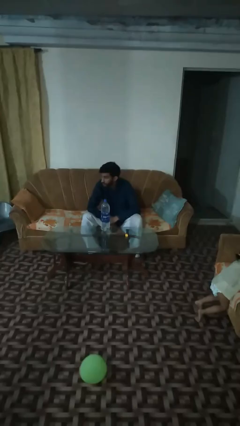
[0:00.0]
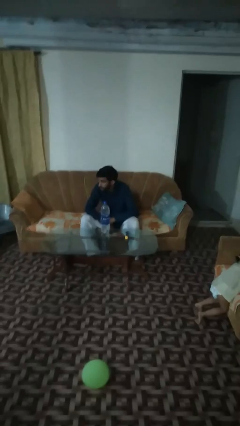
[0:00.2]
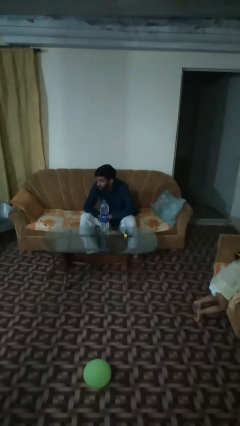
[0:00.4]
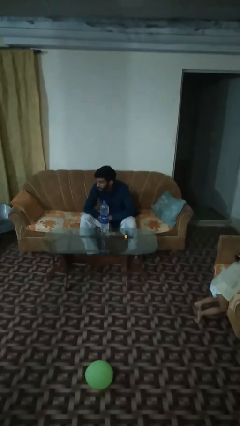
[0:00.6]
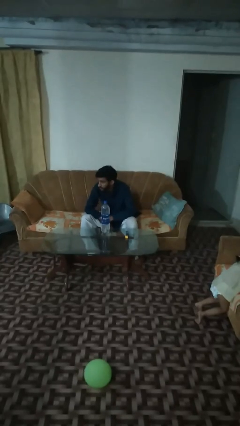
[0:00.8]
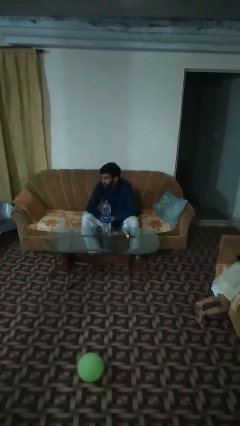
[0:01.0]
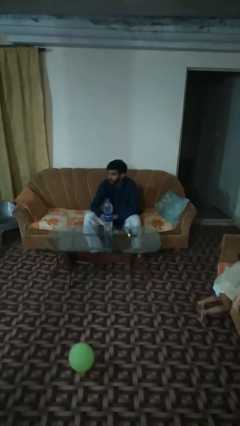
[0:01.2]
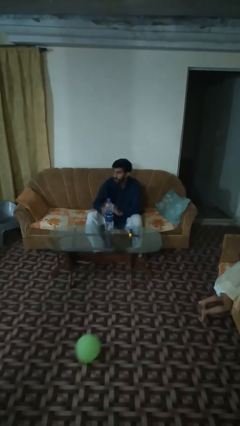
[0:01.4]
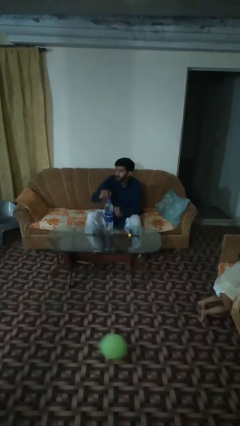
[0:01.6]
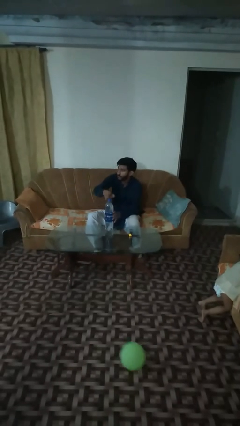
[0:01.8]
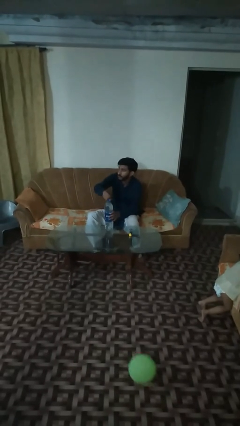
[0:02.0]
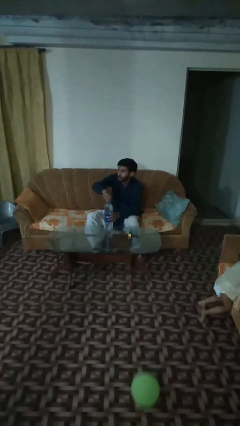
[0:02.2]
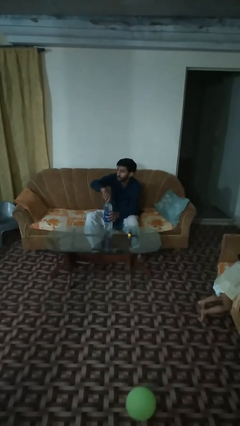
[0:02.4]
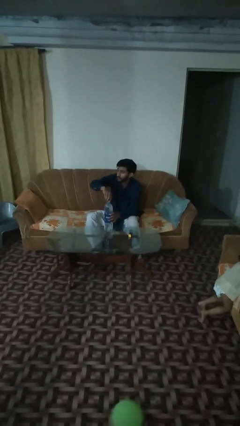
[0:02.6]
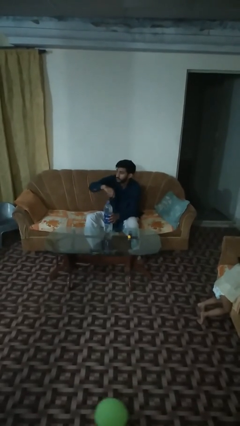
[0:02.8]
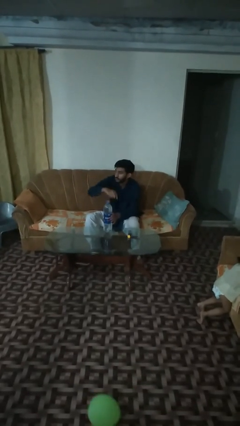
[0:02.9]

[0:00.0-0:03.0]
person unscrews lid from bottle

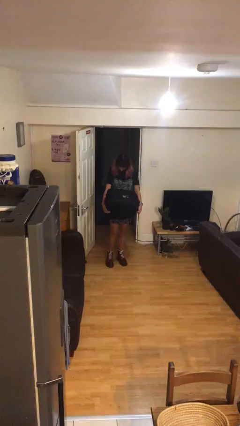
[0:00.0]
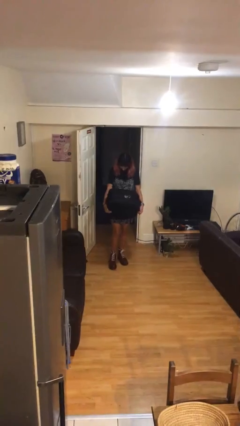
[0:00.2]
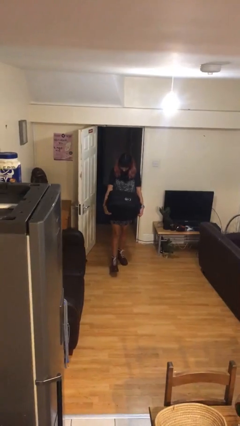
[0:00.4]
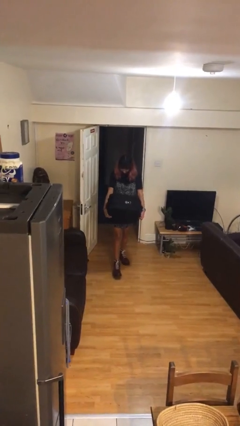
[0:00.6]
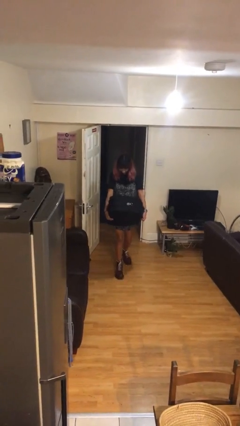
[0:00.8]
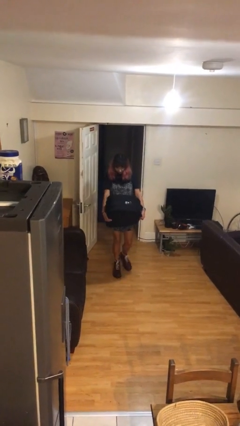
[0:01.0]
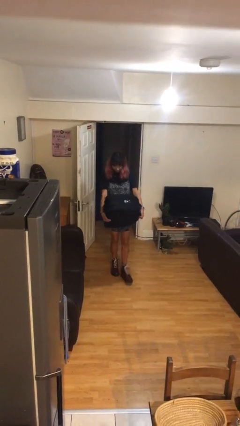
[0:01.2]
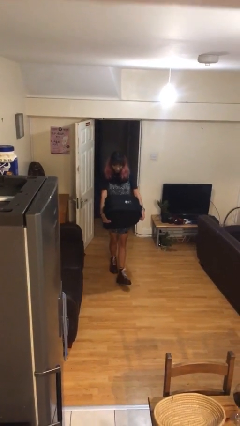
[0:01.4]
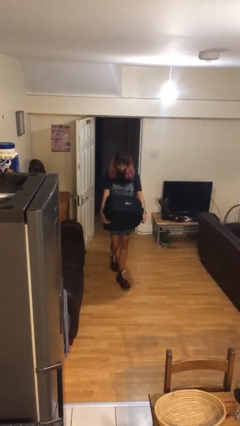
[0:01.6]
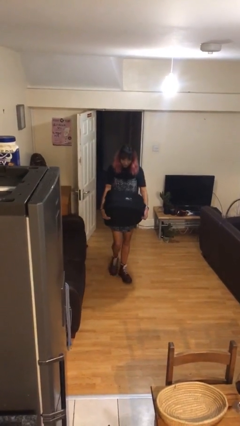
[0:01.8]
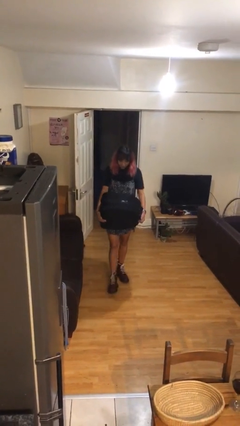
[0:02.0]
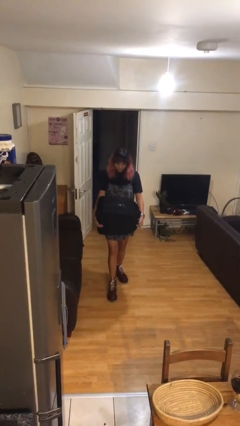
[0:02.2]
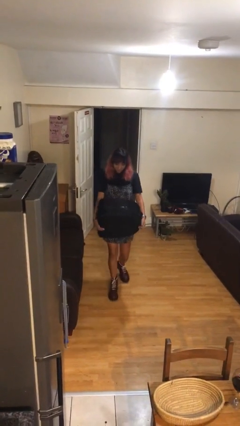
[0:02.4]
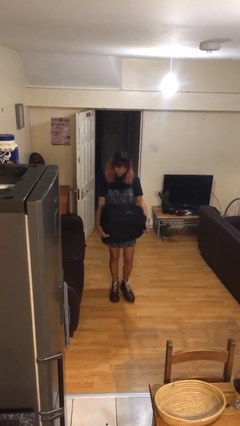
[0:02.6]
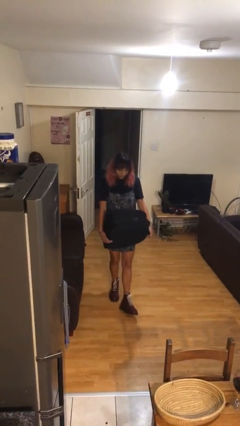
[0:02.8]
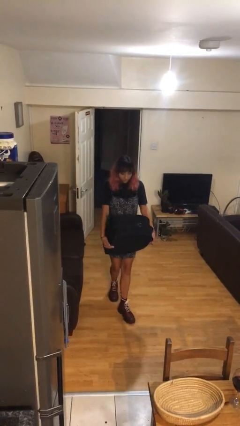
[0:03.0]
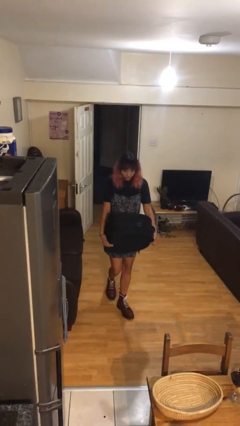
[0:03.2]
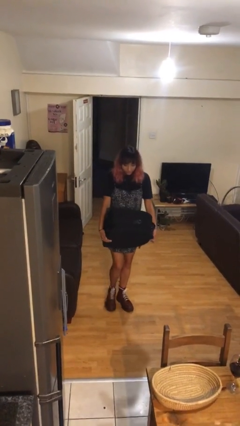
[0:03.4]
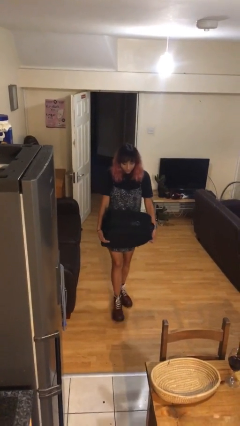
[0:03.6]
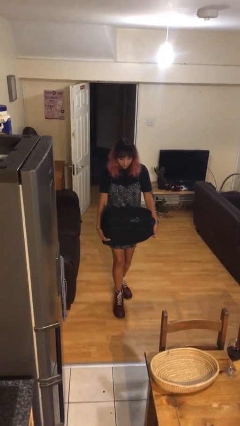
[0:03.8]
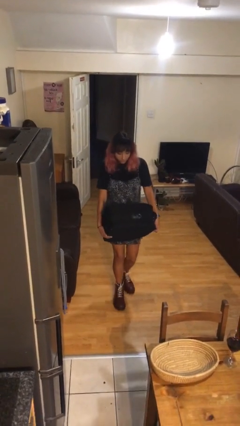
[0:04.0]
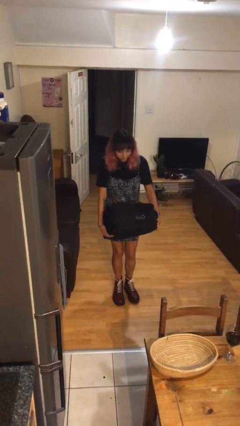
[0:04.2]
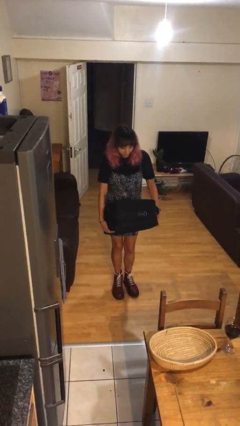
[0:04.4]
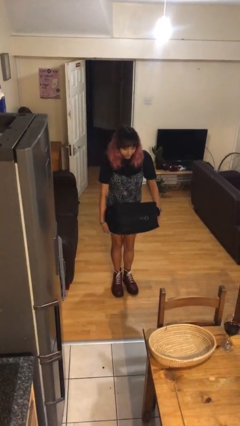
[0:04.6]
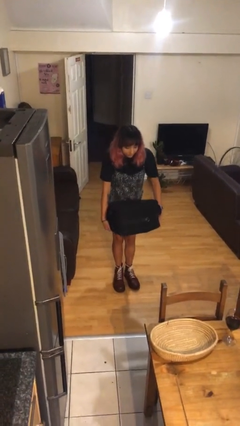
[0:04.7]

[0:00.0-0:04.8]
person carries heavy object

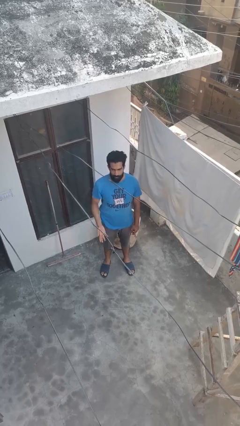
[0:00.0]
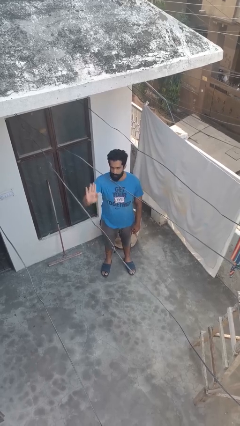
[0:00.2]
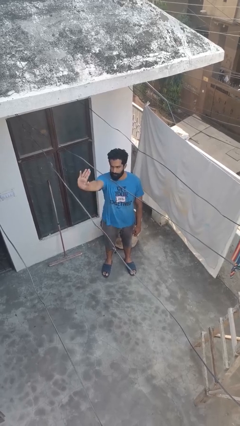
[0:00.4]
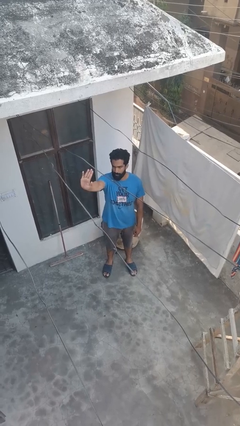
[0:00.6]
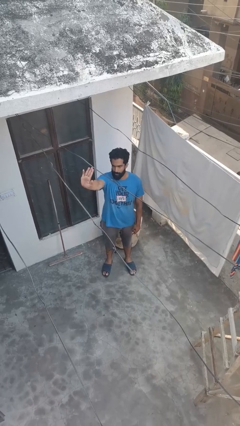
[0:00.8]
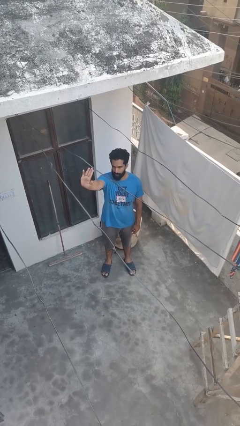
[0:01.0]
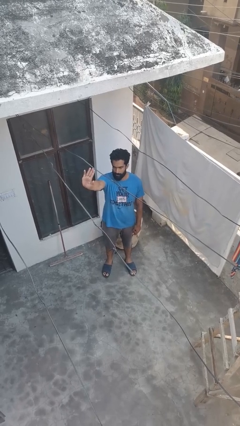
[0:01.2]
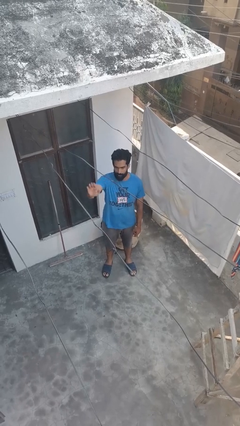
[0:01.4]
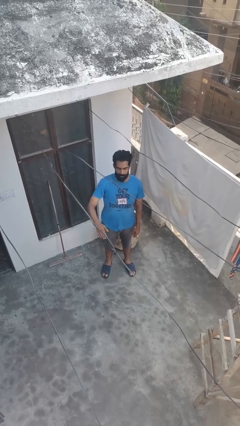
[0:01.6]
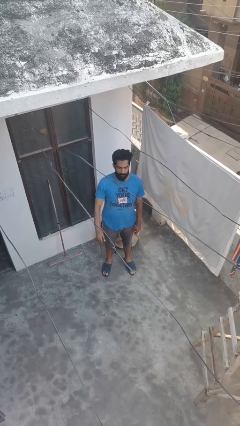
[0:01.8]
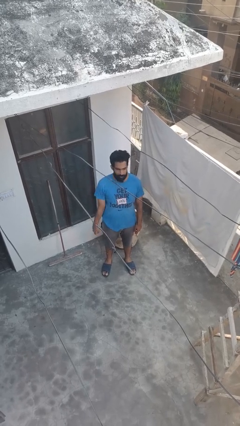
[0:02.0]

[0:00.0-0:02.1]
person gestures stop

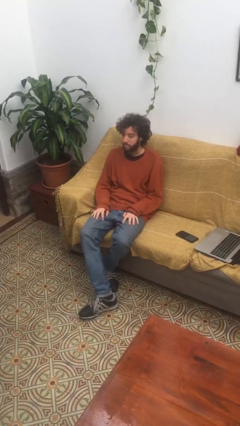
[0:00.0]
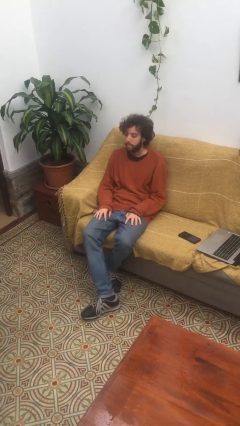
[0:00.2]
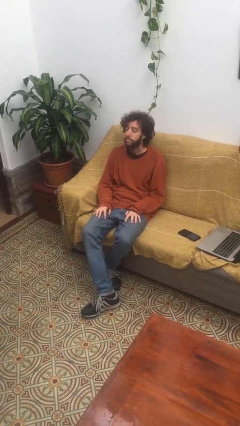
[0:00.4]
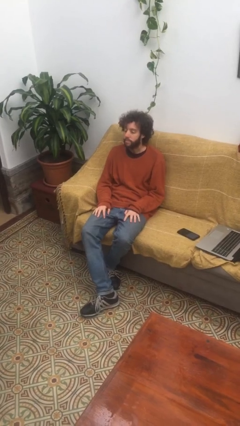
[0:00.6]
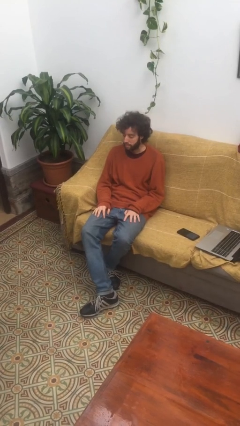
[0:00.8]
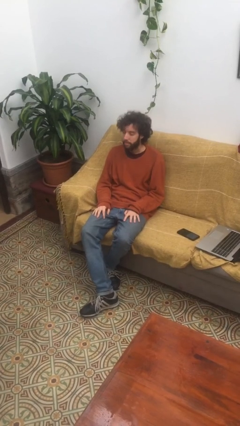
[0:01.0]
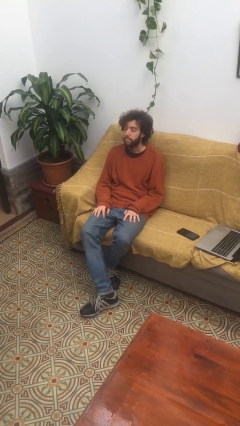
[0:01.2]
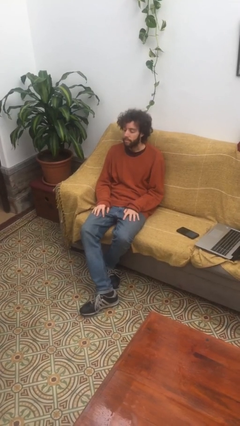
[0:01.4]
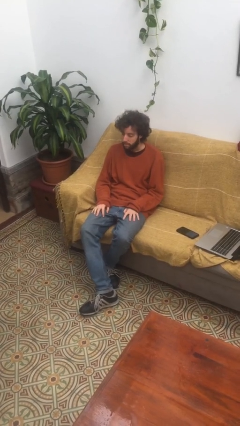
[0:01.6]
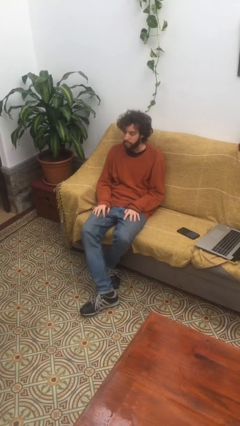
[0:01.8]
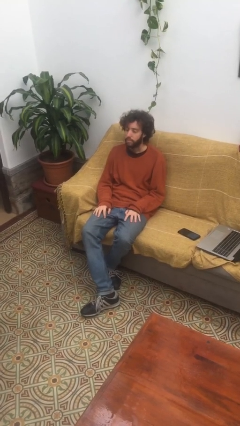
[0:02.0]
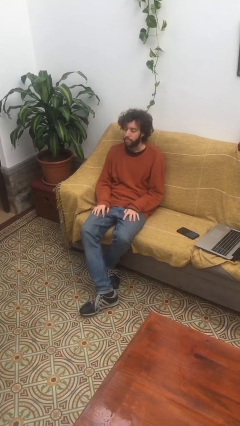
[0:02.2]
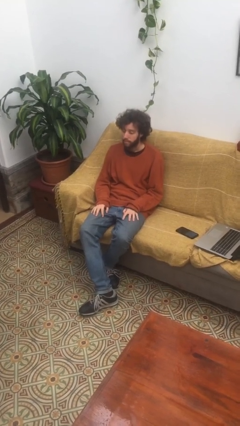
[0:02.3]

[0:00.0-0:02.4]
person nods head

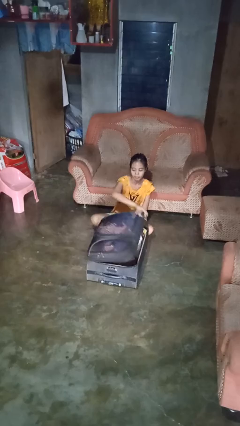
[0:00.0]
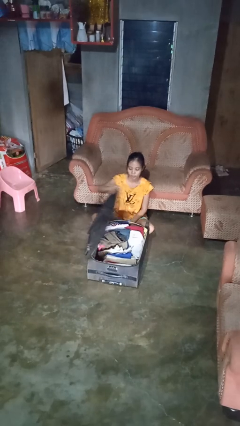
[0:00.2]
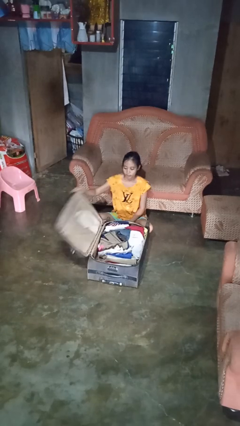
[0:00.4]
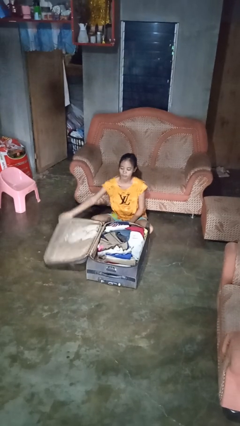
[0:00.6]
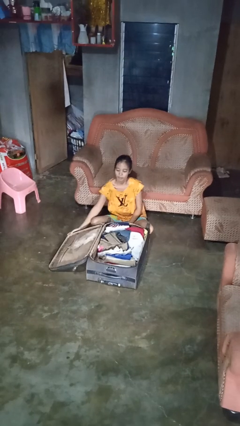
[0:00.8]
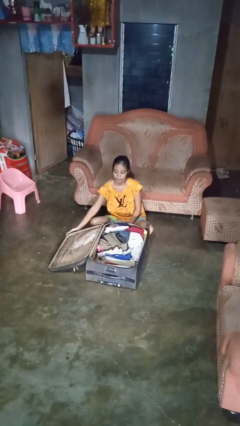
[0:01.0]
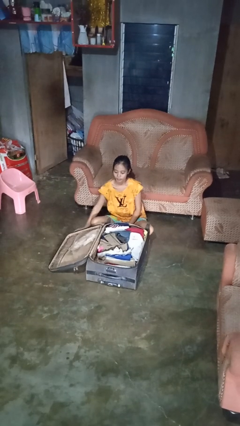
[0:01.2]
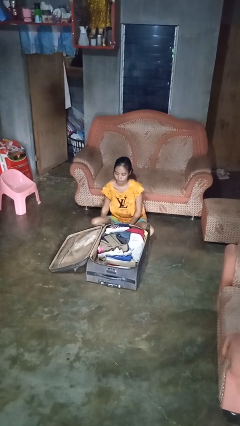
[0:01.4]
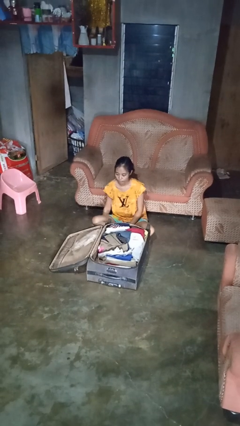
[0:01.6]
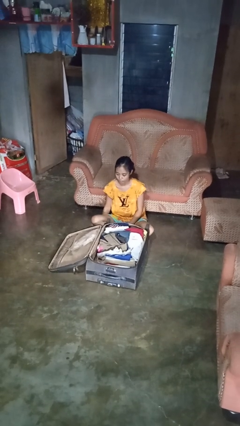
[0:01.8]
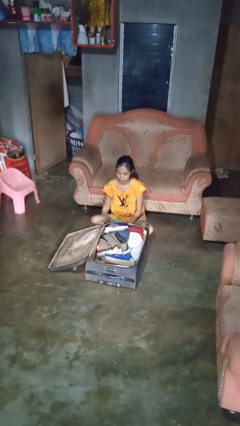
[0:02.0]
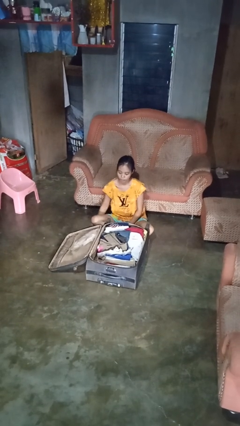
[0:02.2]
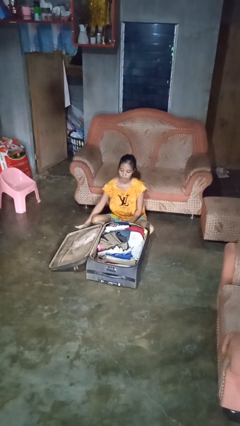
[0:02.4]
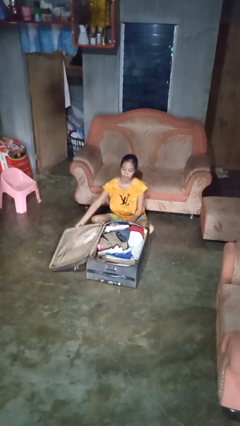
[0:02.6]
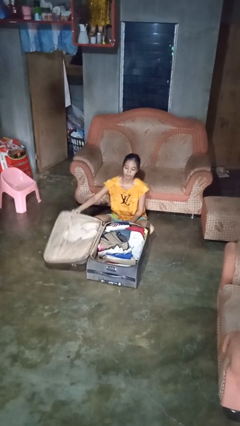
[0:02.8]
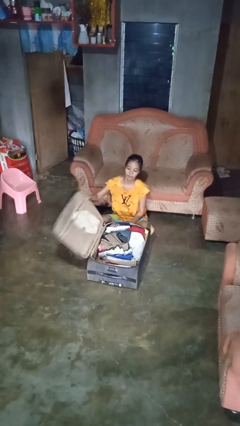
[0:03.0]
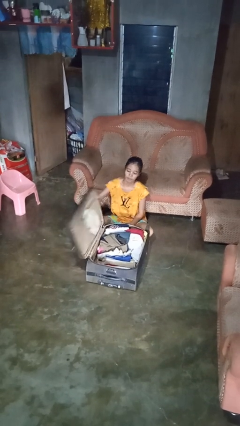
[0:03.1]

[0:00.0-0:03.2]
person opens suitcase

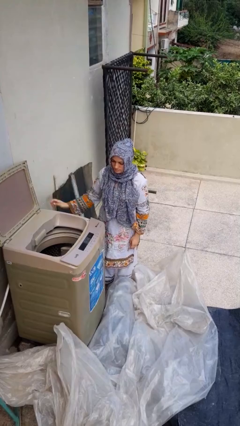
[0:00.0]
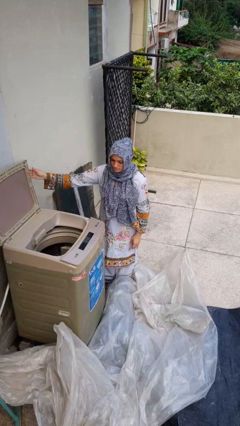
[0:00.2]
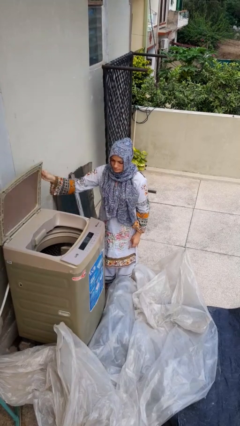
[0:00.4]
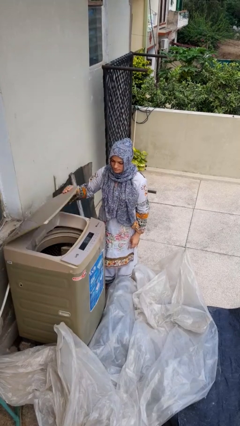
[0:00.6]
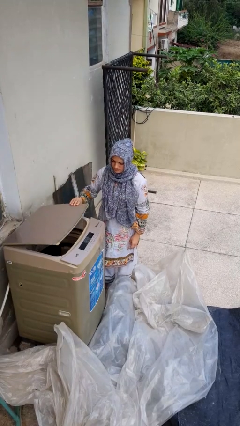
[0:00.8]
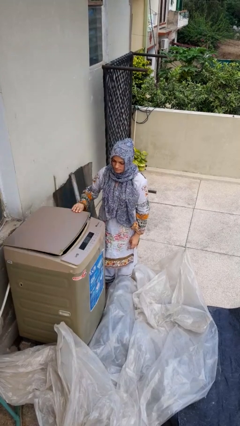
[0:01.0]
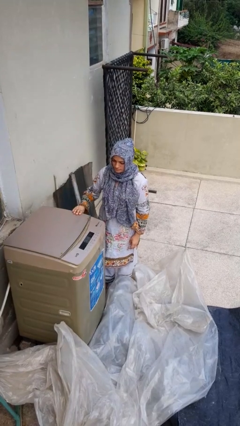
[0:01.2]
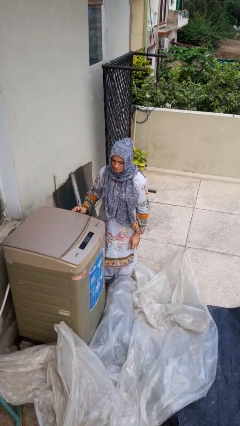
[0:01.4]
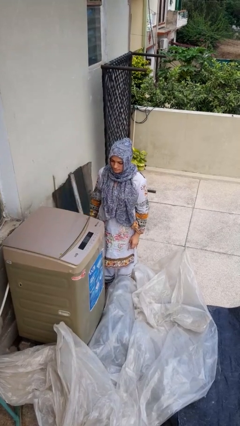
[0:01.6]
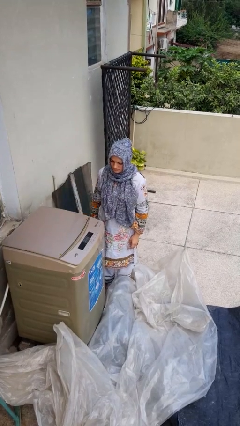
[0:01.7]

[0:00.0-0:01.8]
person closes clothes washer

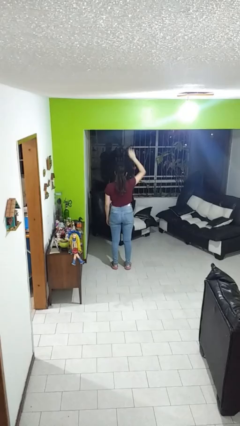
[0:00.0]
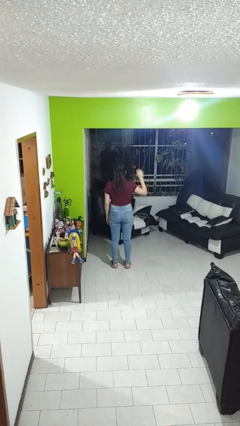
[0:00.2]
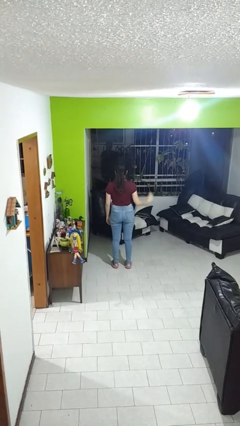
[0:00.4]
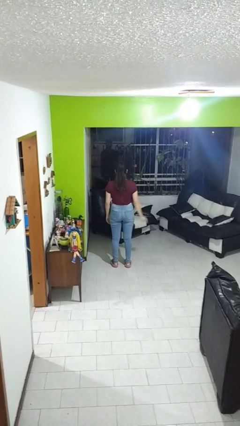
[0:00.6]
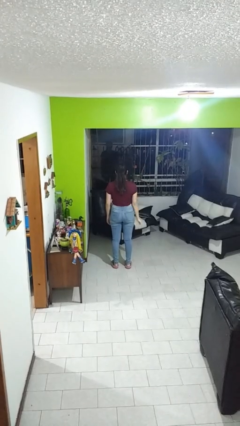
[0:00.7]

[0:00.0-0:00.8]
person gestures lower hand
